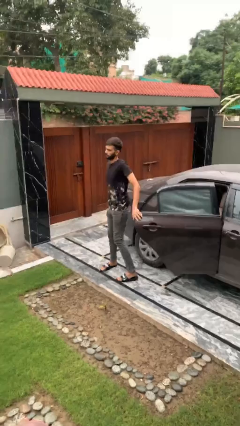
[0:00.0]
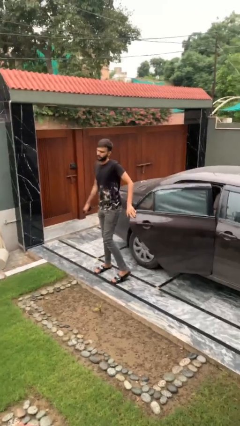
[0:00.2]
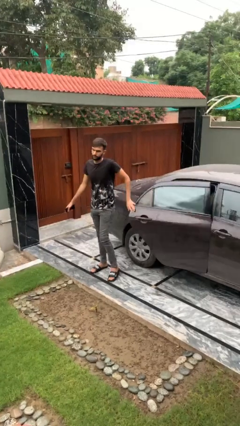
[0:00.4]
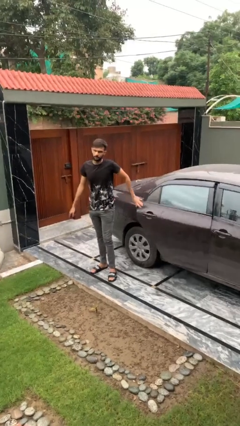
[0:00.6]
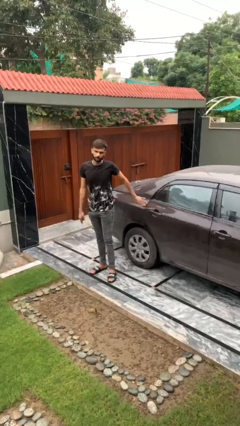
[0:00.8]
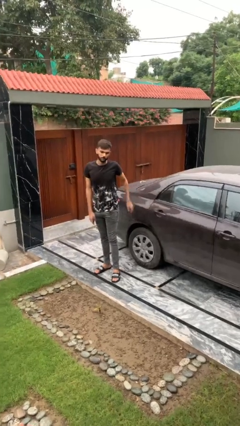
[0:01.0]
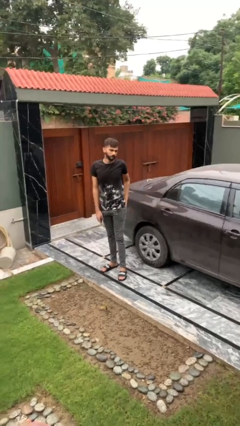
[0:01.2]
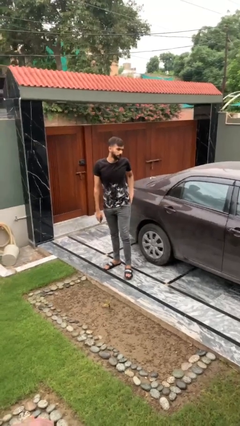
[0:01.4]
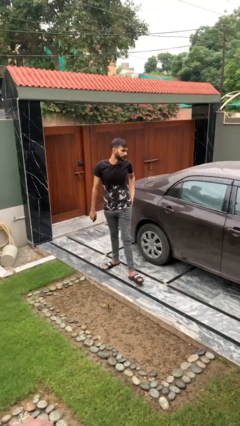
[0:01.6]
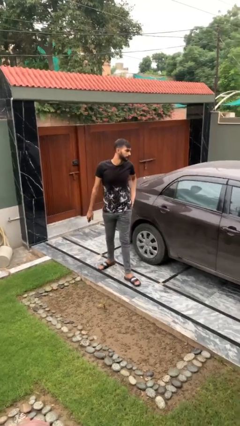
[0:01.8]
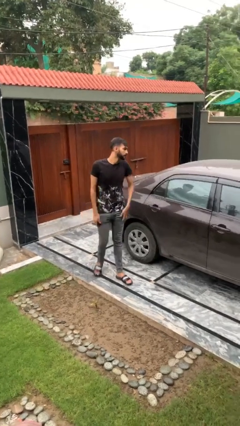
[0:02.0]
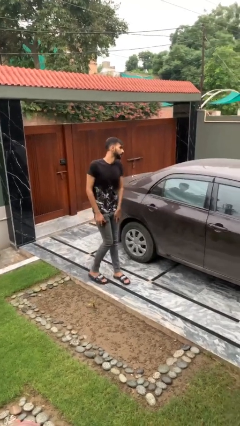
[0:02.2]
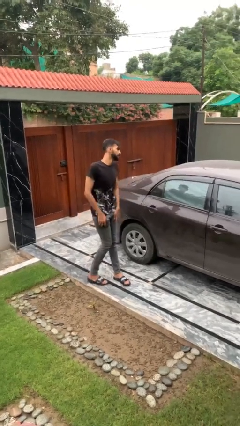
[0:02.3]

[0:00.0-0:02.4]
person closes car door

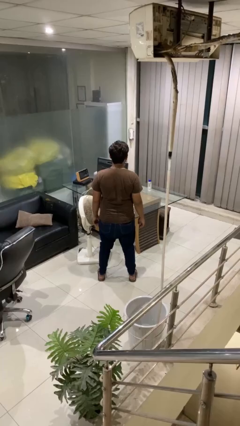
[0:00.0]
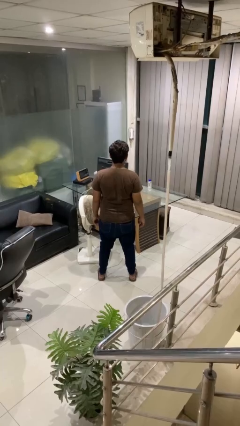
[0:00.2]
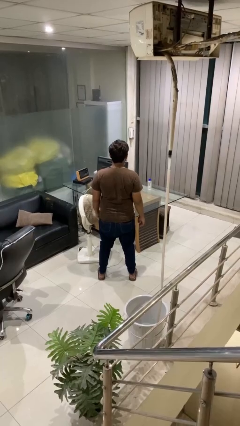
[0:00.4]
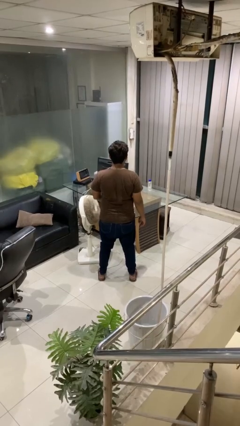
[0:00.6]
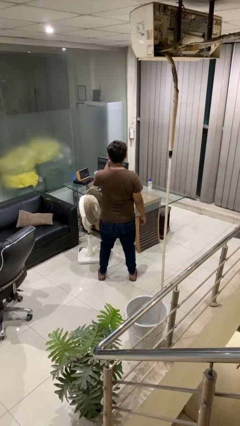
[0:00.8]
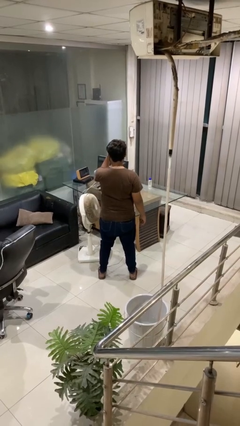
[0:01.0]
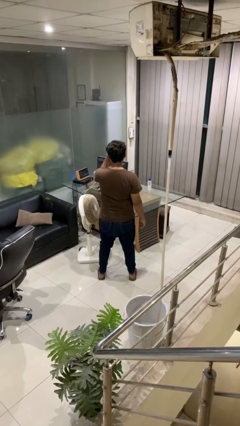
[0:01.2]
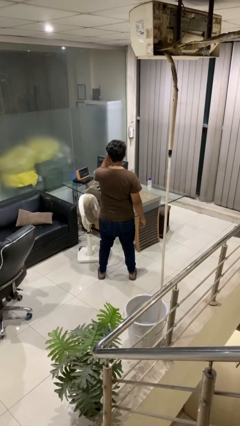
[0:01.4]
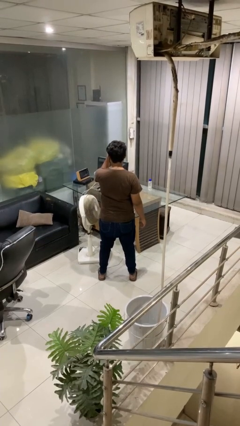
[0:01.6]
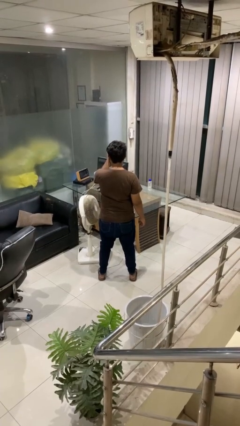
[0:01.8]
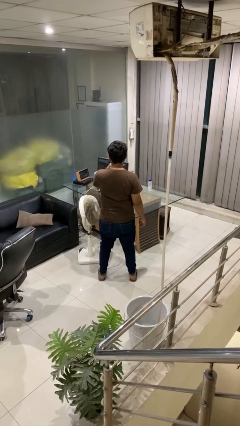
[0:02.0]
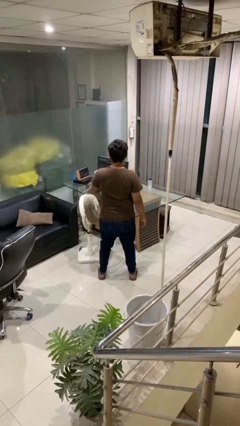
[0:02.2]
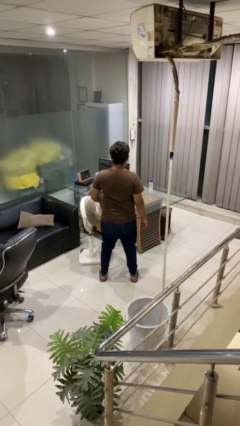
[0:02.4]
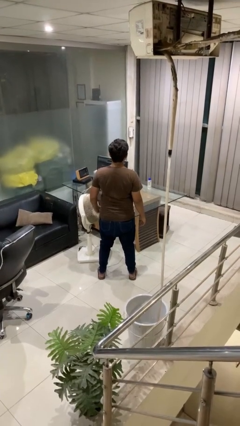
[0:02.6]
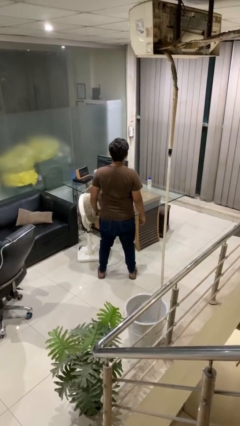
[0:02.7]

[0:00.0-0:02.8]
person gestures watch closely

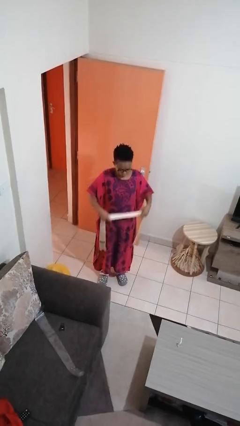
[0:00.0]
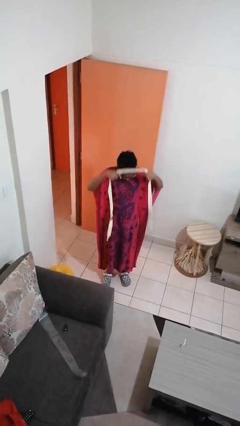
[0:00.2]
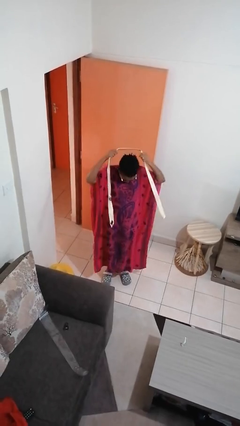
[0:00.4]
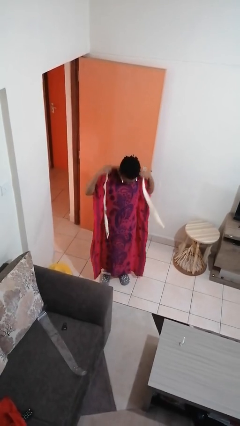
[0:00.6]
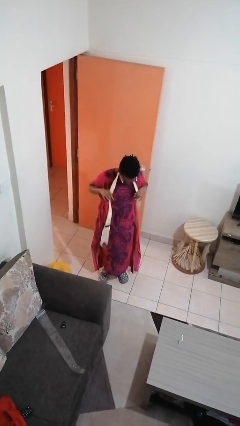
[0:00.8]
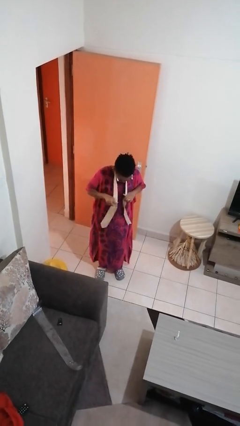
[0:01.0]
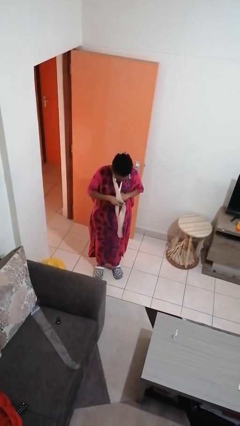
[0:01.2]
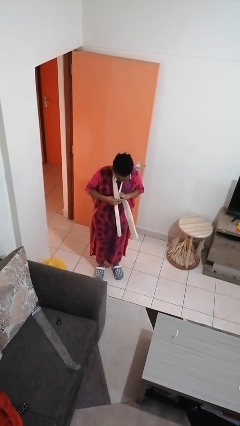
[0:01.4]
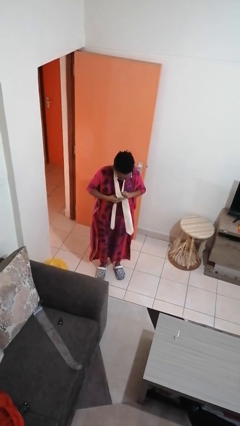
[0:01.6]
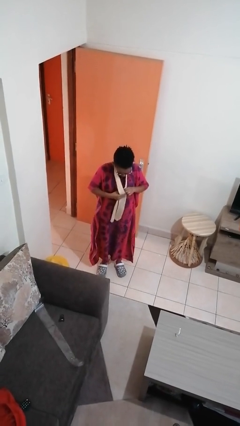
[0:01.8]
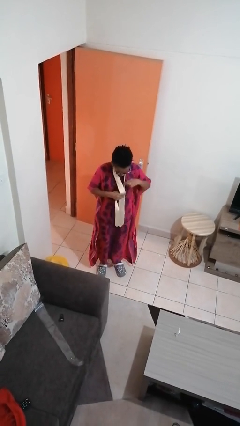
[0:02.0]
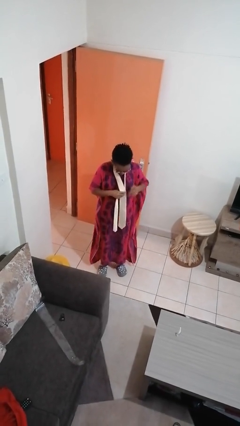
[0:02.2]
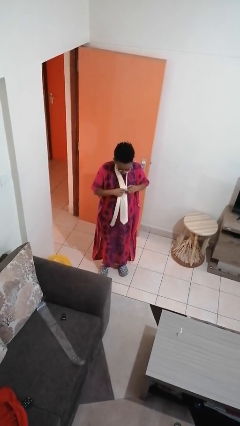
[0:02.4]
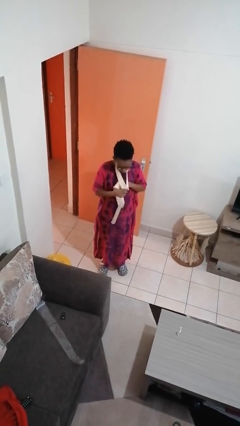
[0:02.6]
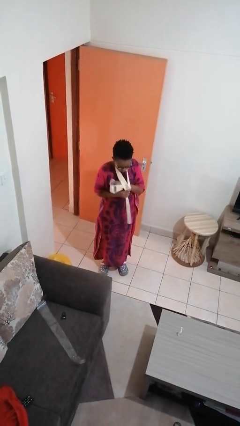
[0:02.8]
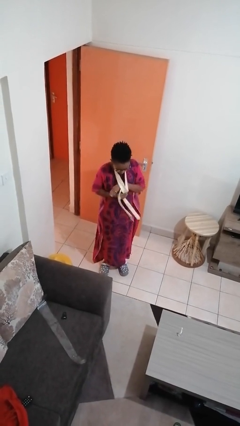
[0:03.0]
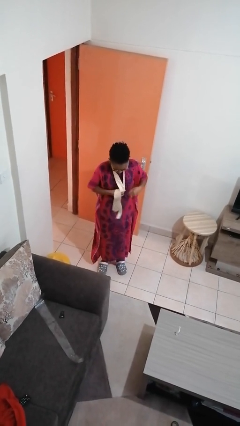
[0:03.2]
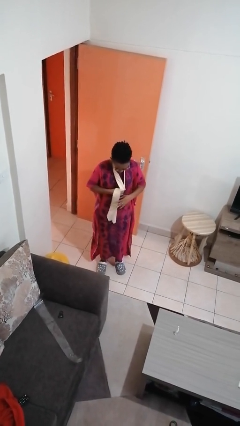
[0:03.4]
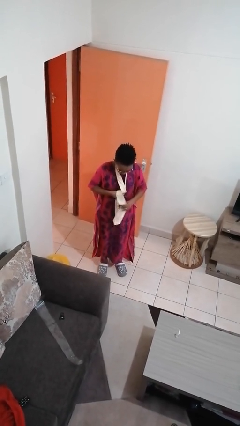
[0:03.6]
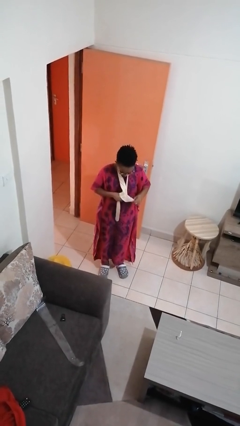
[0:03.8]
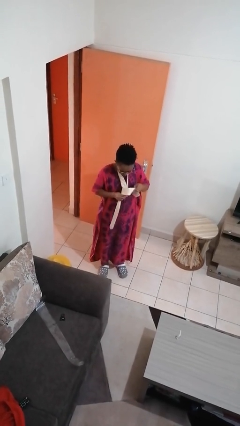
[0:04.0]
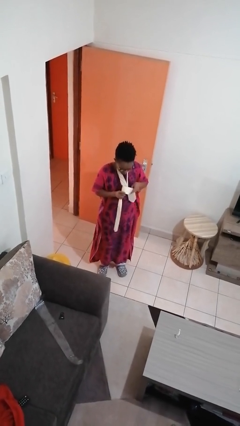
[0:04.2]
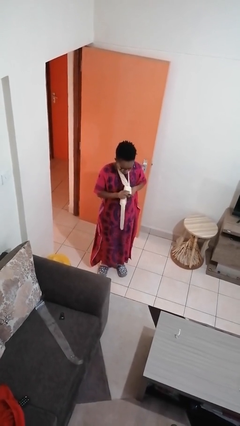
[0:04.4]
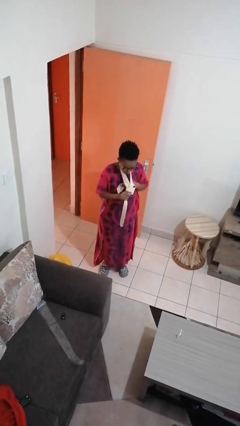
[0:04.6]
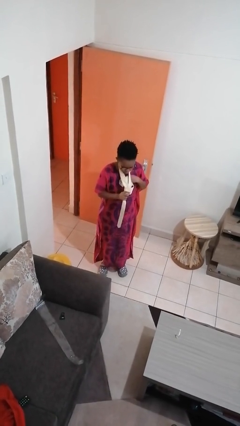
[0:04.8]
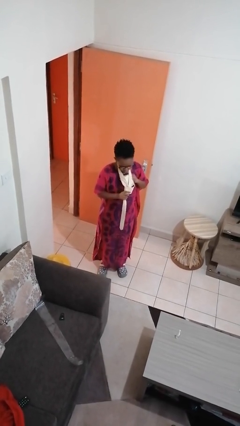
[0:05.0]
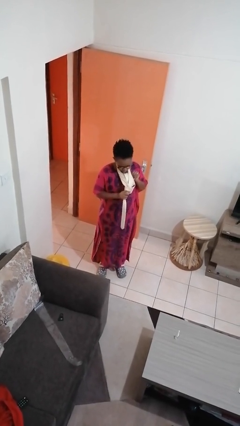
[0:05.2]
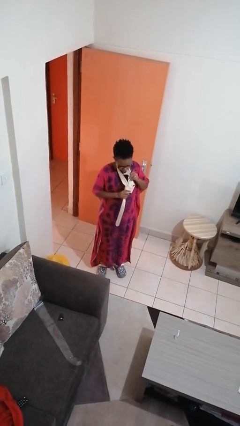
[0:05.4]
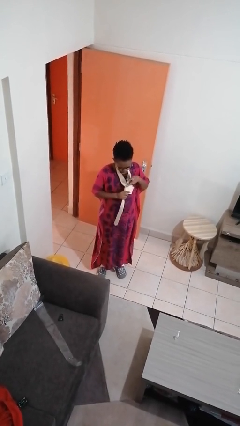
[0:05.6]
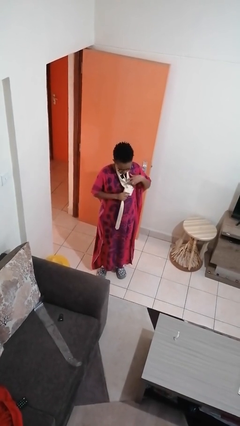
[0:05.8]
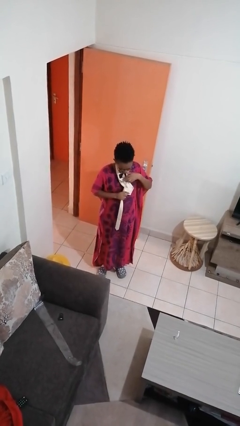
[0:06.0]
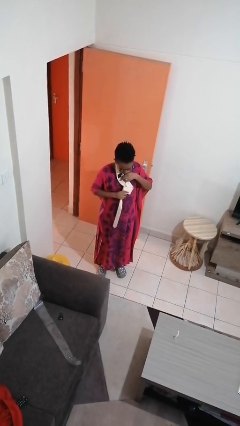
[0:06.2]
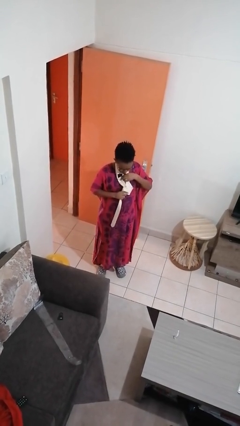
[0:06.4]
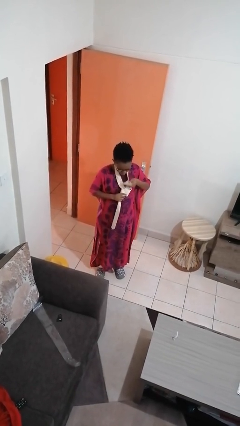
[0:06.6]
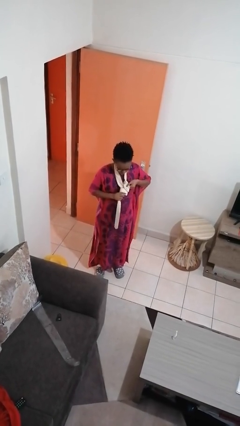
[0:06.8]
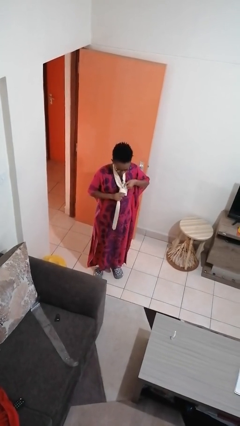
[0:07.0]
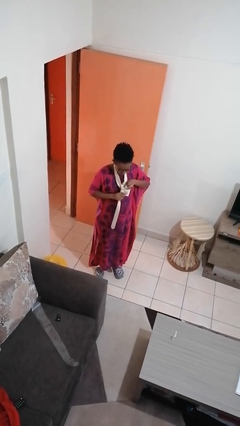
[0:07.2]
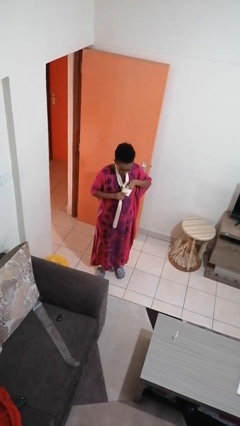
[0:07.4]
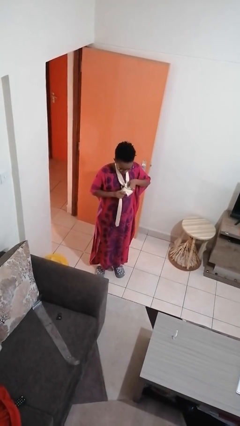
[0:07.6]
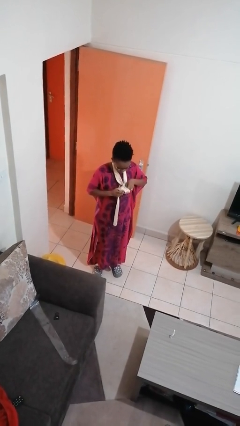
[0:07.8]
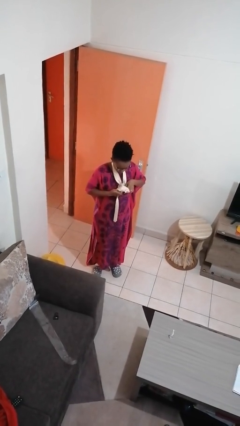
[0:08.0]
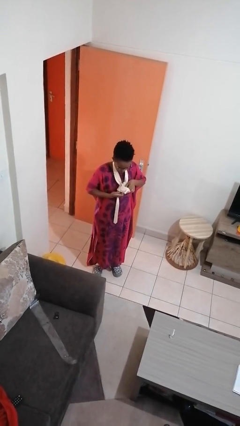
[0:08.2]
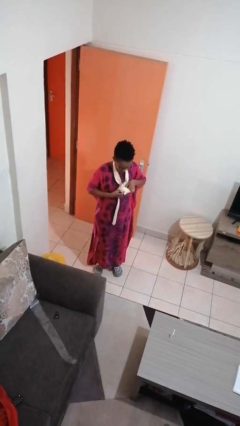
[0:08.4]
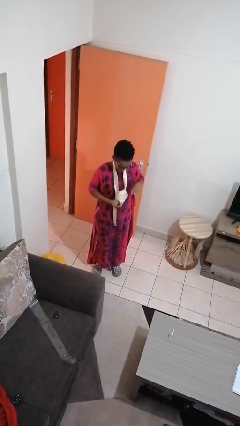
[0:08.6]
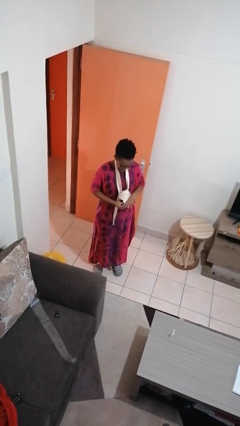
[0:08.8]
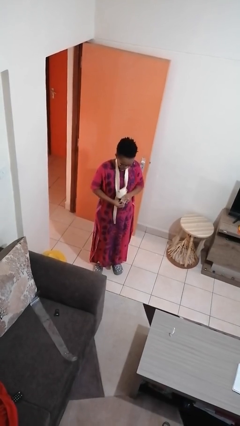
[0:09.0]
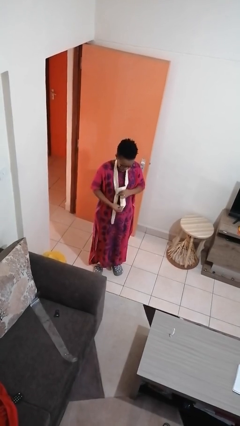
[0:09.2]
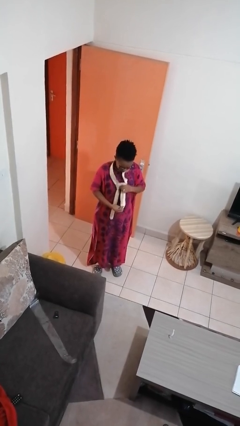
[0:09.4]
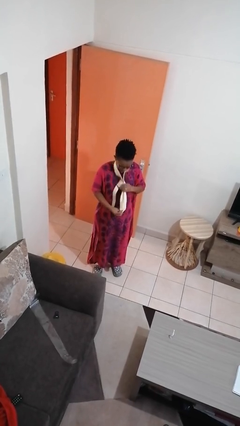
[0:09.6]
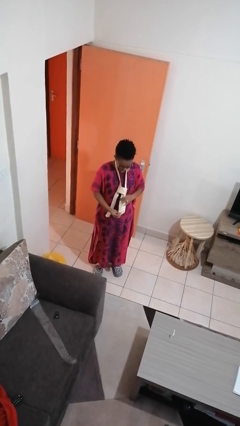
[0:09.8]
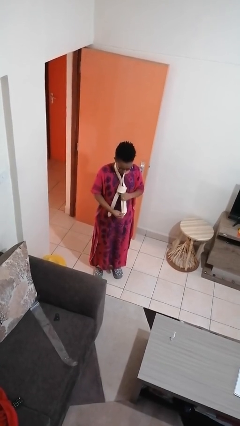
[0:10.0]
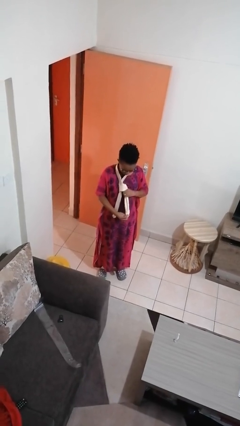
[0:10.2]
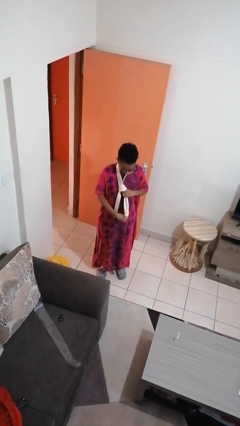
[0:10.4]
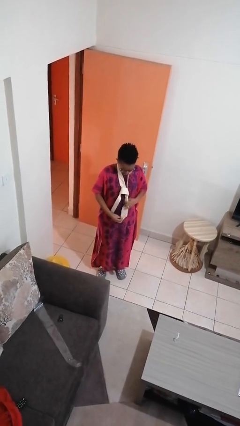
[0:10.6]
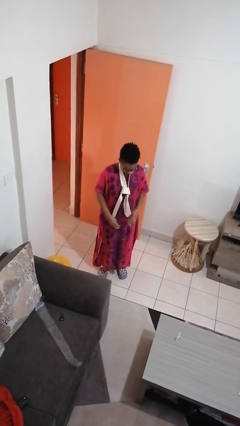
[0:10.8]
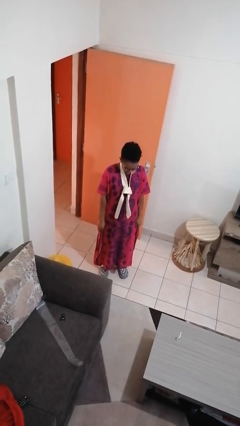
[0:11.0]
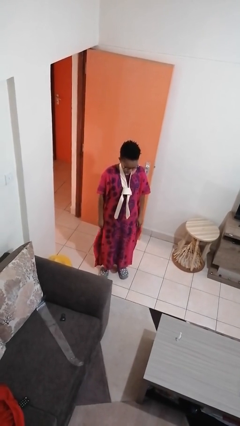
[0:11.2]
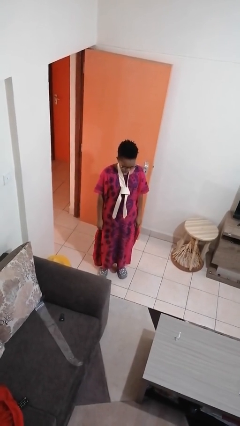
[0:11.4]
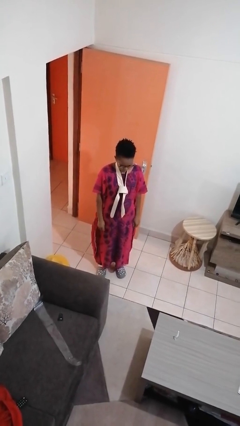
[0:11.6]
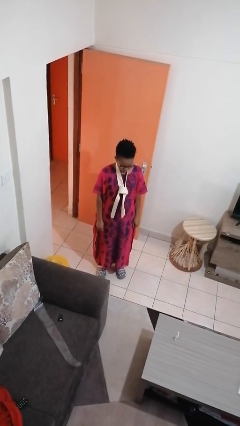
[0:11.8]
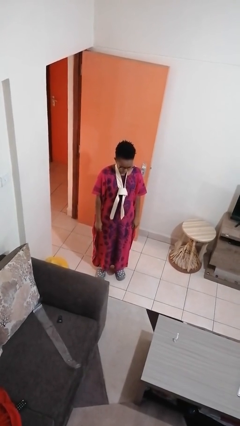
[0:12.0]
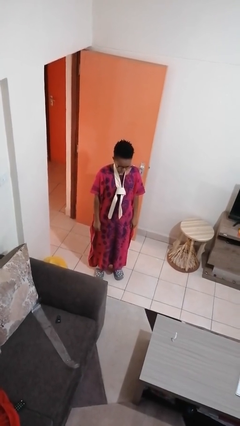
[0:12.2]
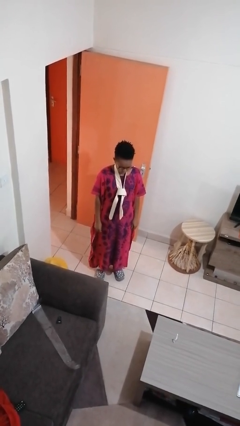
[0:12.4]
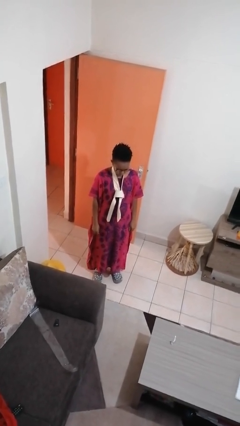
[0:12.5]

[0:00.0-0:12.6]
person puts on necktie
